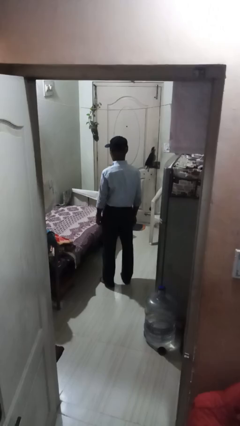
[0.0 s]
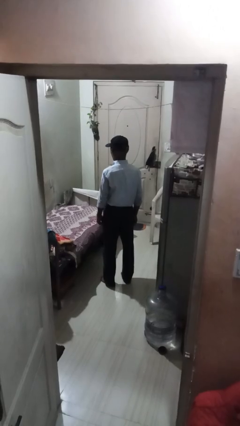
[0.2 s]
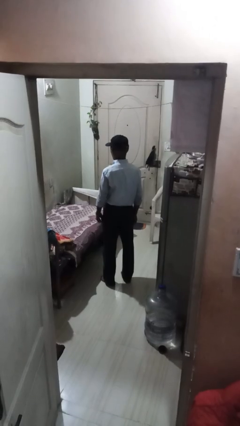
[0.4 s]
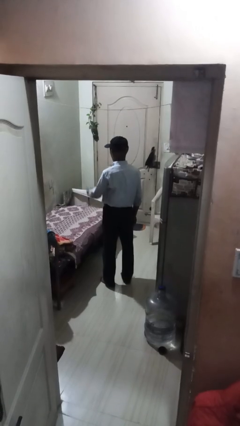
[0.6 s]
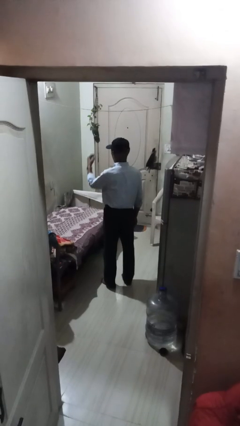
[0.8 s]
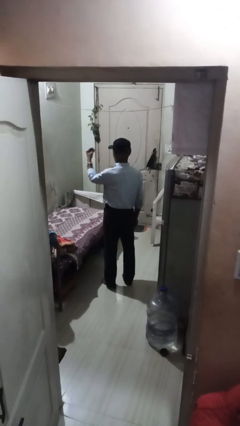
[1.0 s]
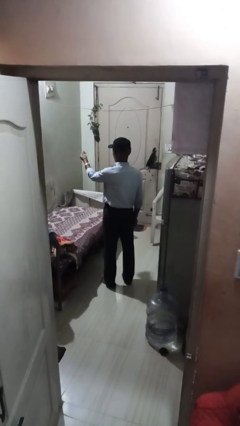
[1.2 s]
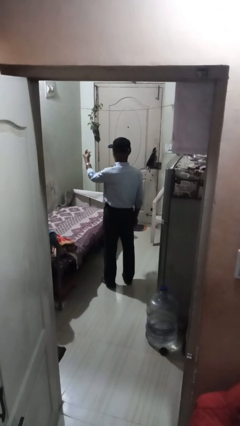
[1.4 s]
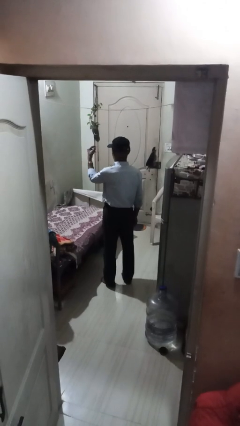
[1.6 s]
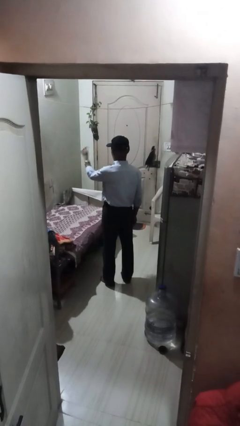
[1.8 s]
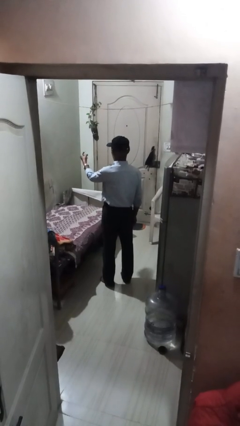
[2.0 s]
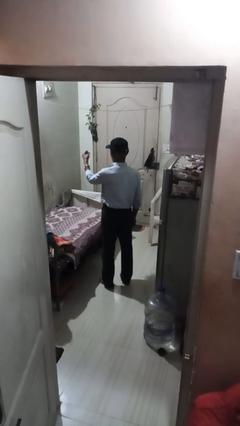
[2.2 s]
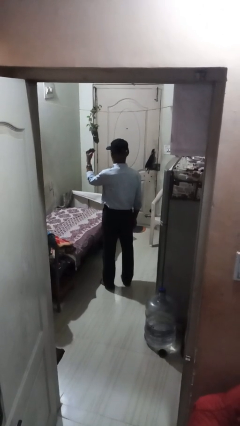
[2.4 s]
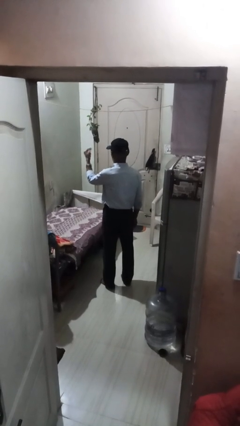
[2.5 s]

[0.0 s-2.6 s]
person snaps fingers

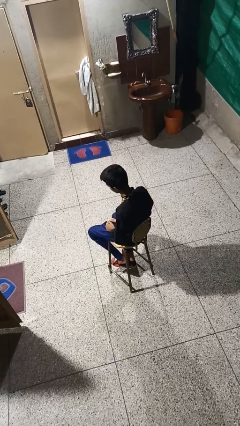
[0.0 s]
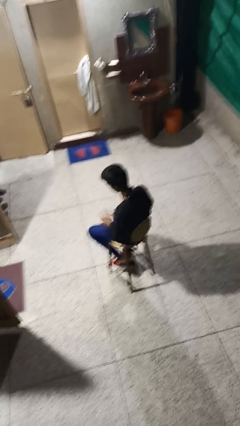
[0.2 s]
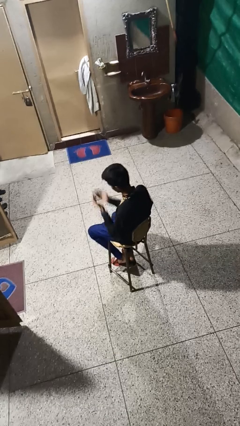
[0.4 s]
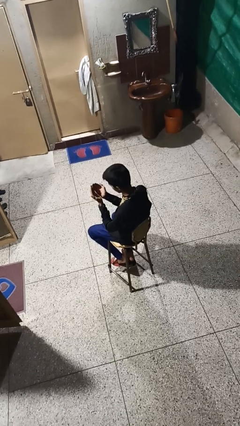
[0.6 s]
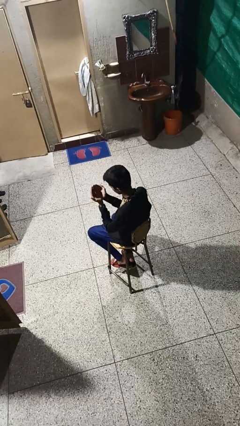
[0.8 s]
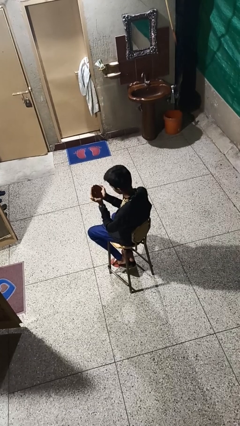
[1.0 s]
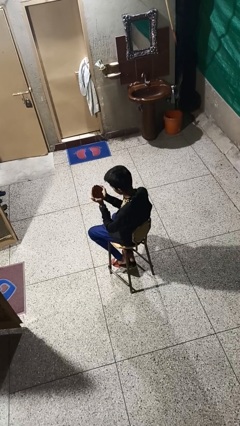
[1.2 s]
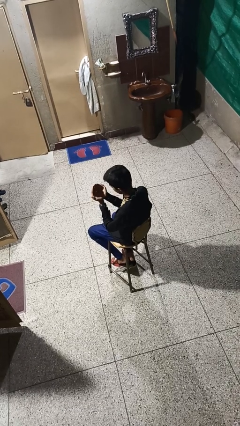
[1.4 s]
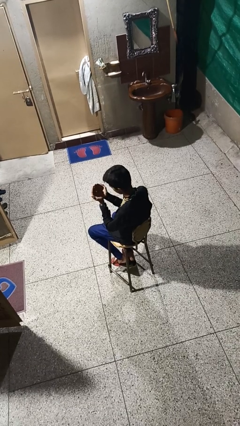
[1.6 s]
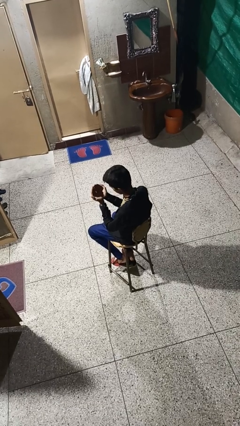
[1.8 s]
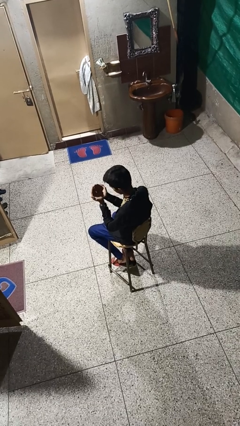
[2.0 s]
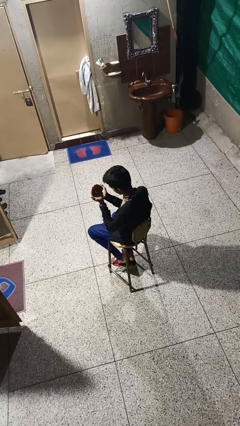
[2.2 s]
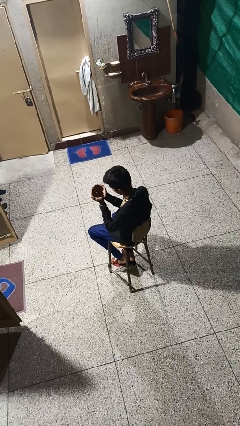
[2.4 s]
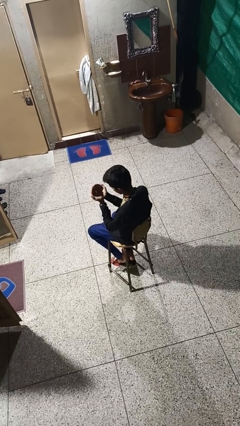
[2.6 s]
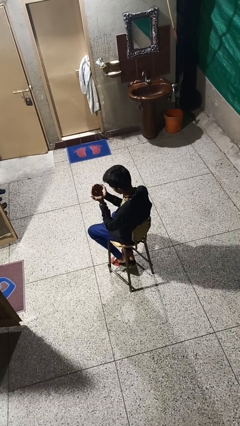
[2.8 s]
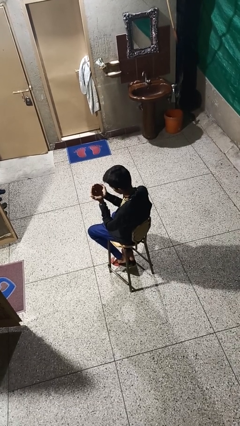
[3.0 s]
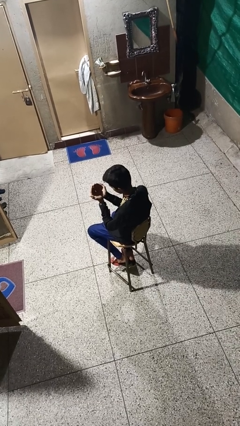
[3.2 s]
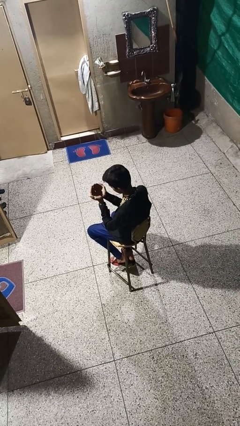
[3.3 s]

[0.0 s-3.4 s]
person prays

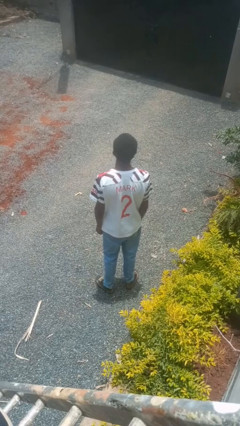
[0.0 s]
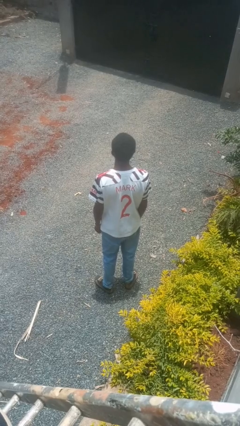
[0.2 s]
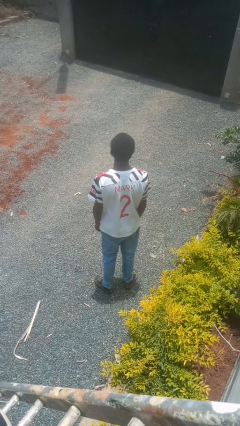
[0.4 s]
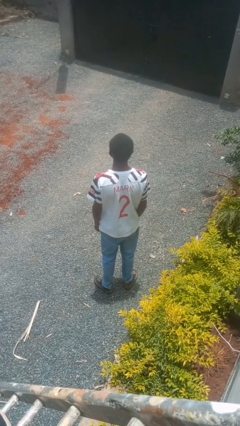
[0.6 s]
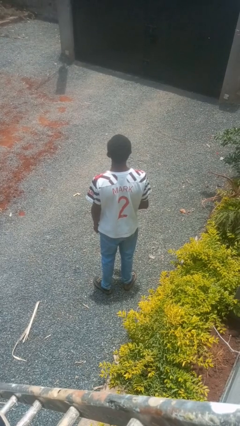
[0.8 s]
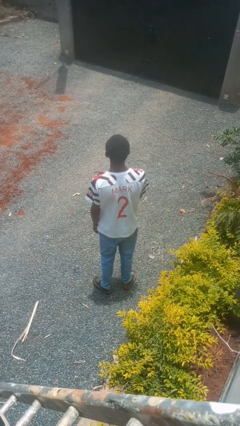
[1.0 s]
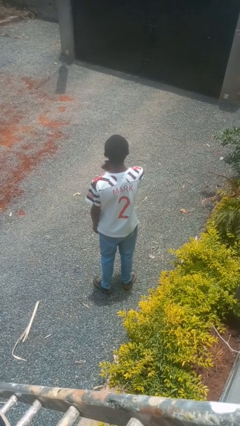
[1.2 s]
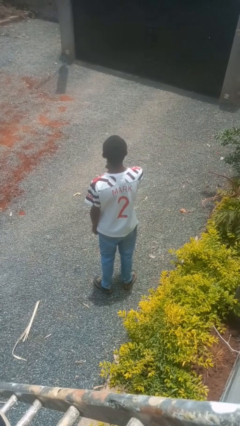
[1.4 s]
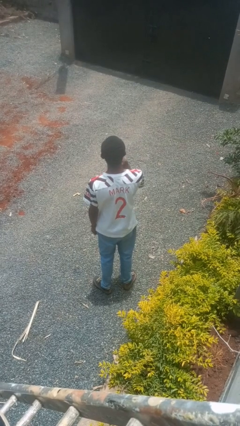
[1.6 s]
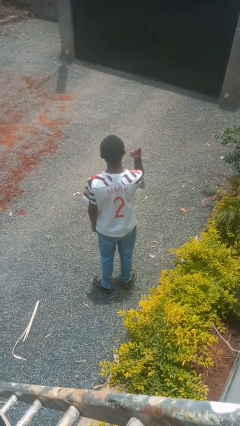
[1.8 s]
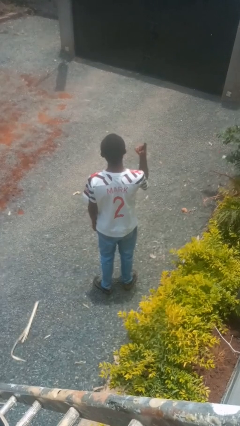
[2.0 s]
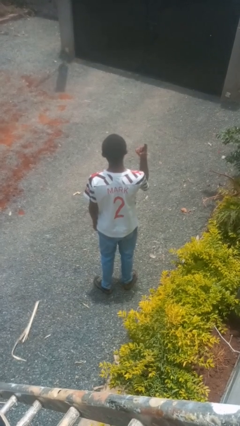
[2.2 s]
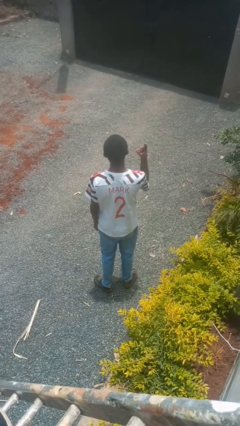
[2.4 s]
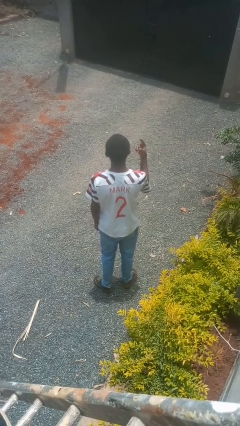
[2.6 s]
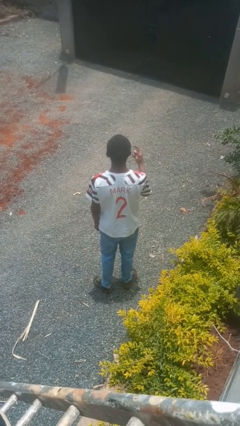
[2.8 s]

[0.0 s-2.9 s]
person gestures cut

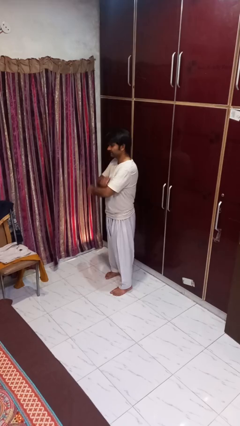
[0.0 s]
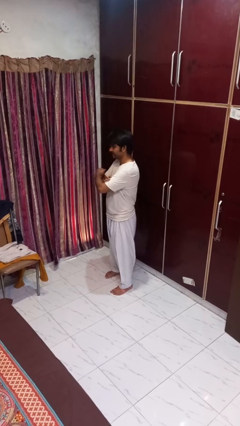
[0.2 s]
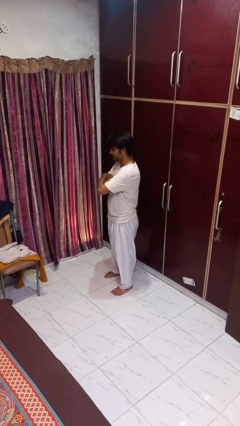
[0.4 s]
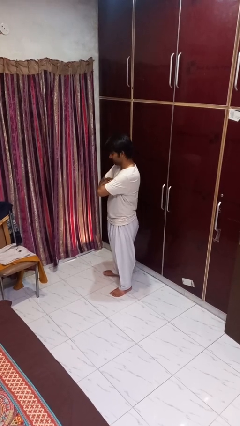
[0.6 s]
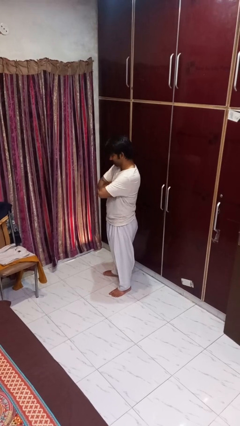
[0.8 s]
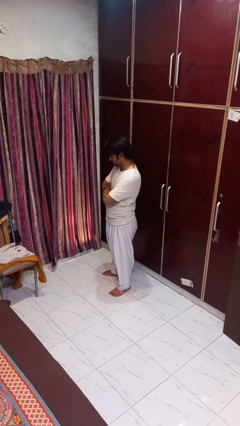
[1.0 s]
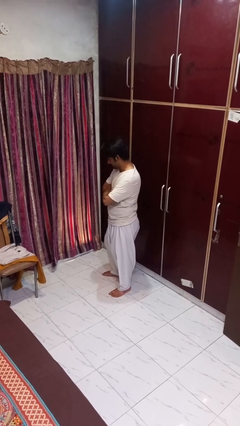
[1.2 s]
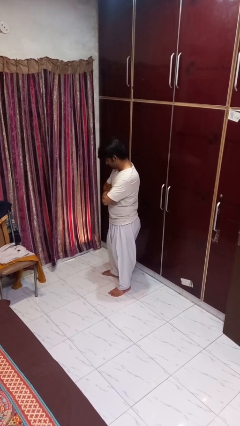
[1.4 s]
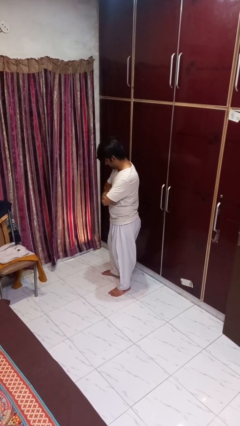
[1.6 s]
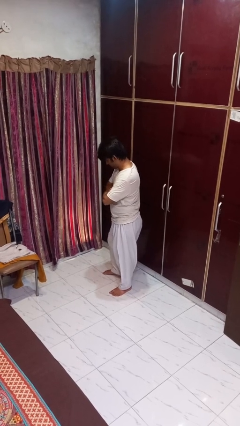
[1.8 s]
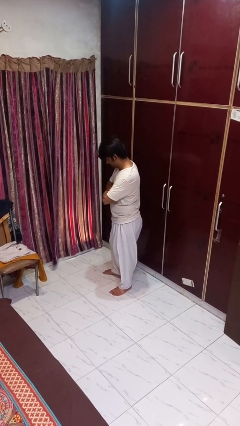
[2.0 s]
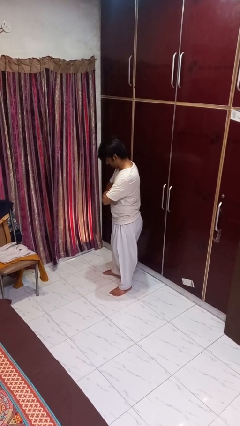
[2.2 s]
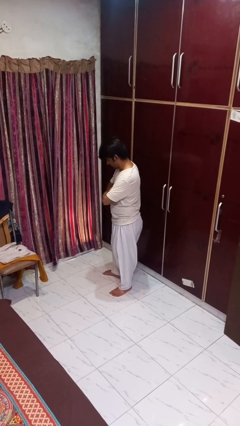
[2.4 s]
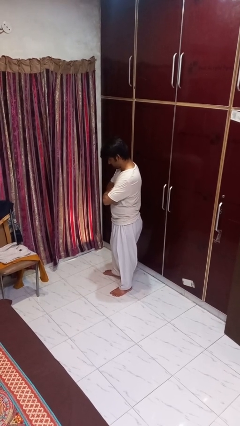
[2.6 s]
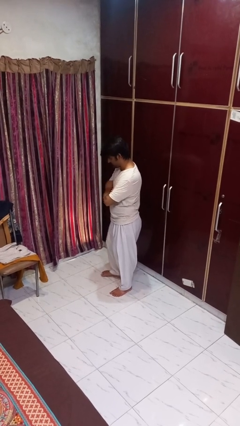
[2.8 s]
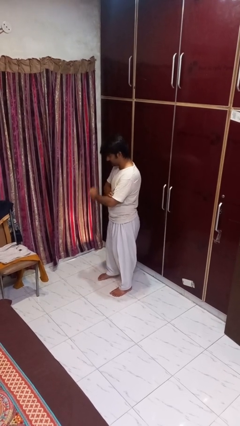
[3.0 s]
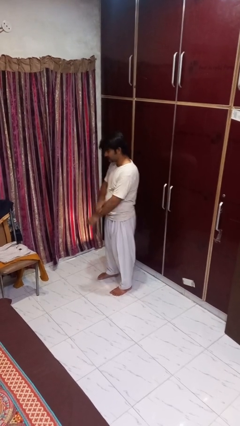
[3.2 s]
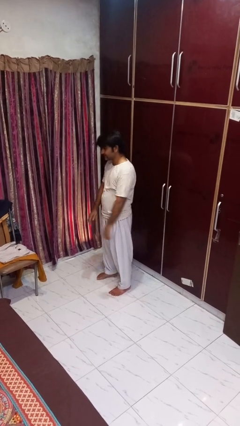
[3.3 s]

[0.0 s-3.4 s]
person crosses arms

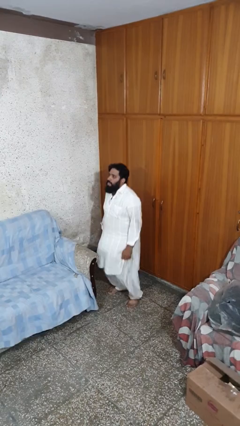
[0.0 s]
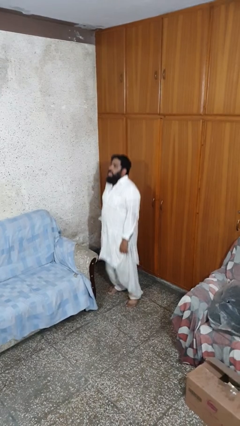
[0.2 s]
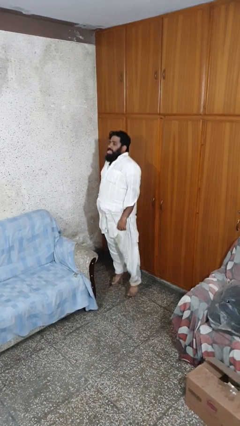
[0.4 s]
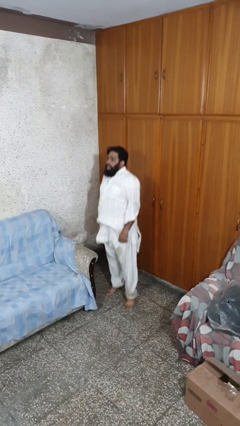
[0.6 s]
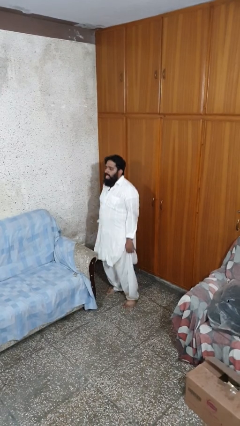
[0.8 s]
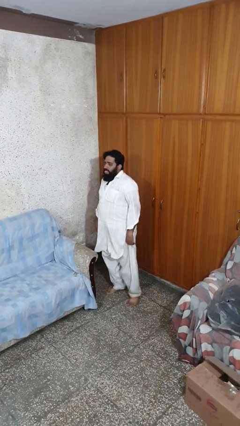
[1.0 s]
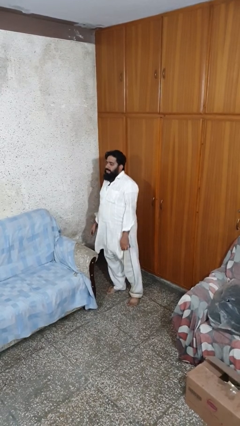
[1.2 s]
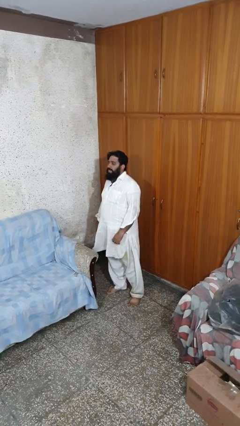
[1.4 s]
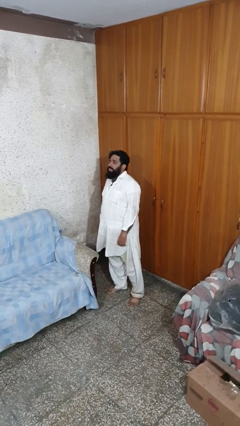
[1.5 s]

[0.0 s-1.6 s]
person jumps

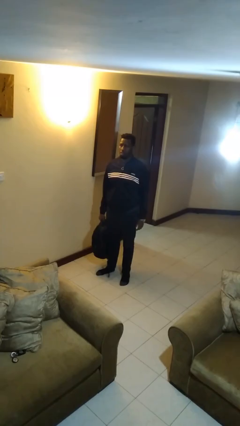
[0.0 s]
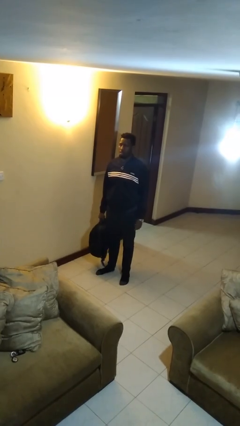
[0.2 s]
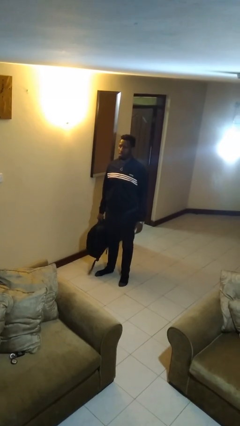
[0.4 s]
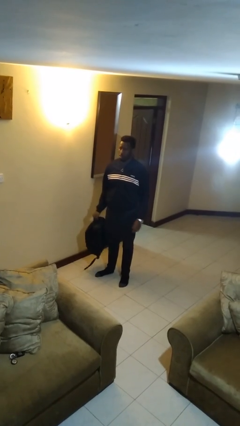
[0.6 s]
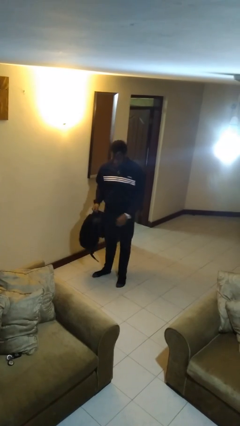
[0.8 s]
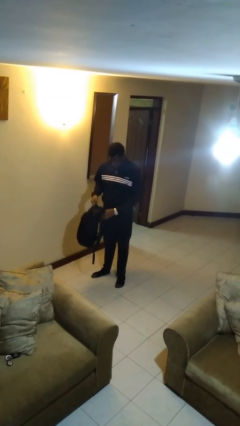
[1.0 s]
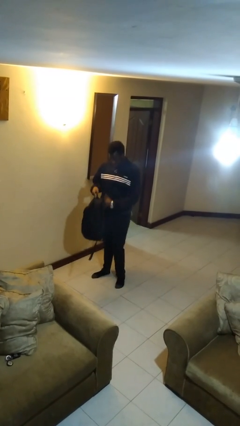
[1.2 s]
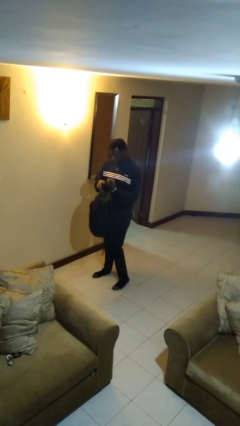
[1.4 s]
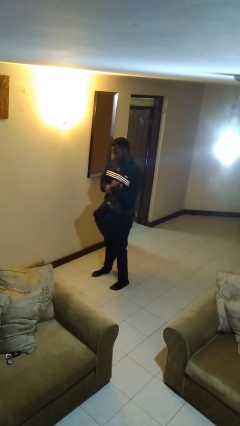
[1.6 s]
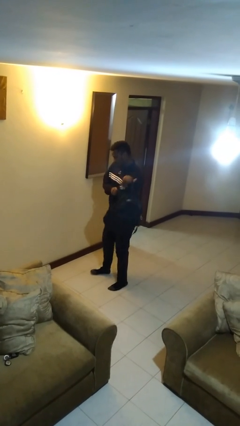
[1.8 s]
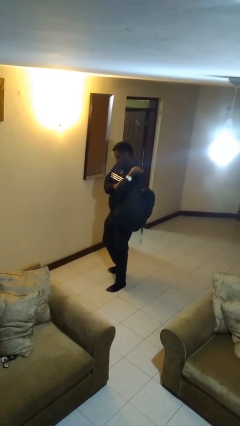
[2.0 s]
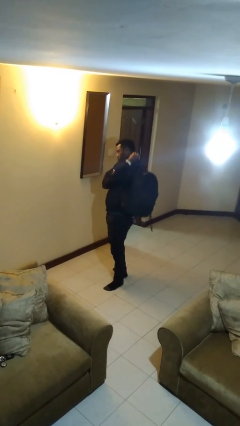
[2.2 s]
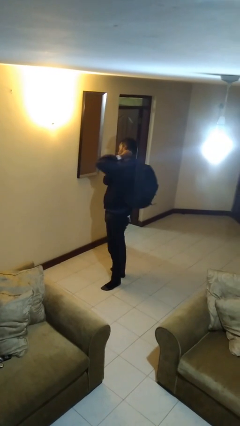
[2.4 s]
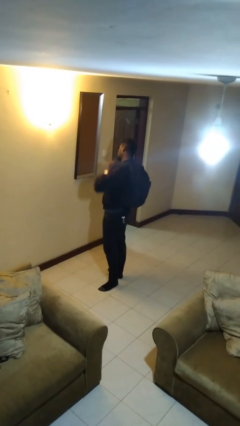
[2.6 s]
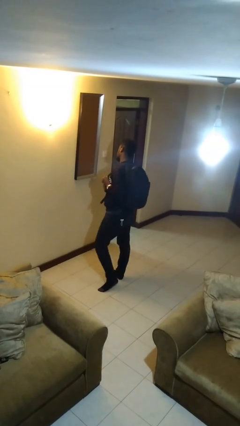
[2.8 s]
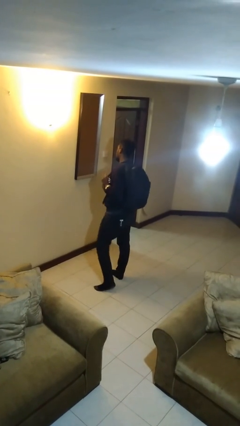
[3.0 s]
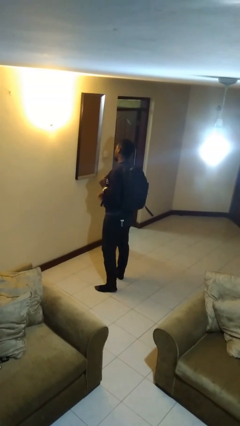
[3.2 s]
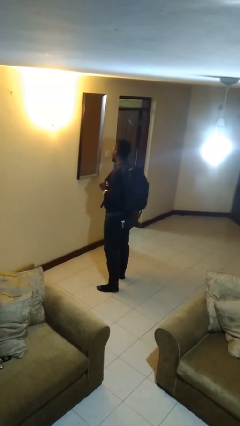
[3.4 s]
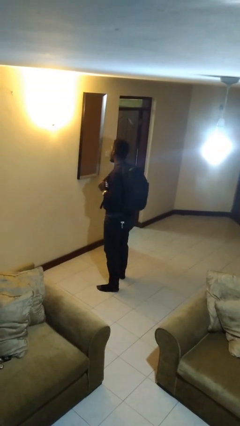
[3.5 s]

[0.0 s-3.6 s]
person puts on backpack
